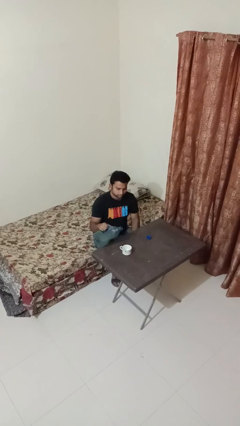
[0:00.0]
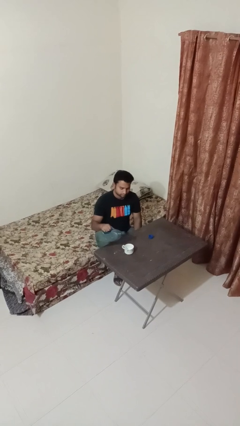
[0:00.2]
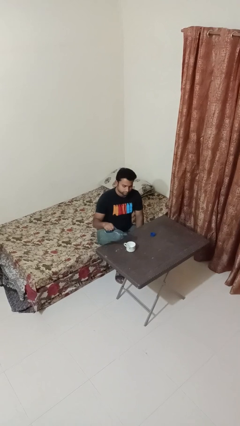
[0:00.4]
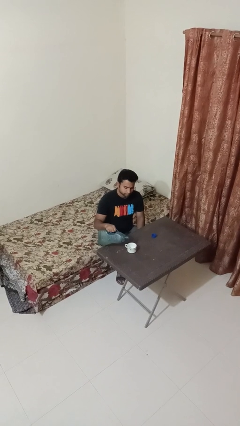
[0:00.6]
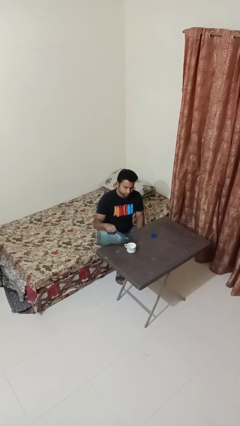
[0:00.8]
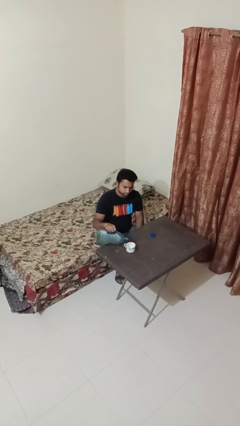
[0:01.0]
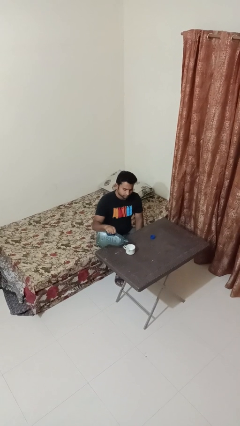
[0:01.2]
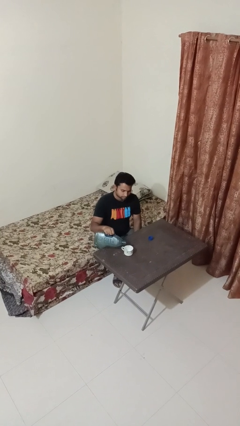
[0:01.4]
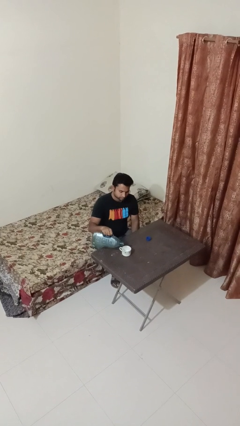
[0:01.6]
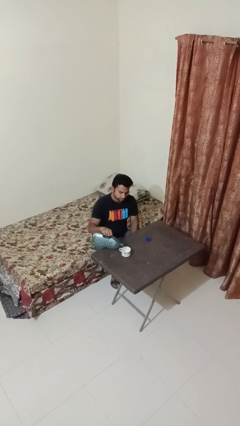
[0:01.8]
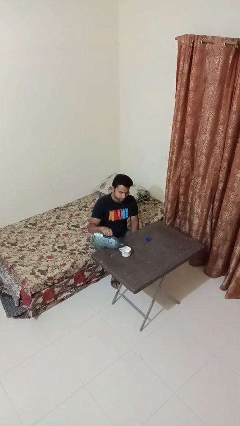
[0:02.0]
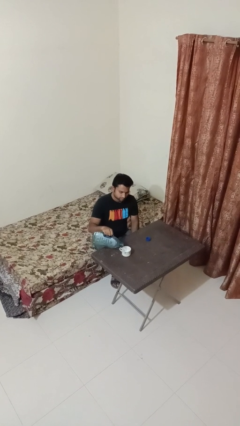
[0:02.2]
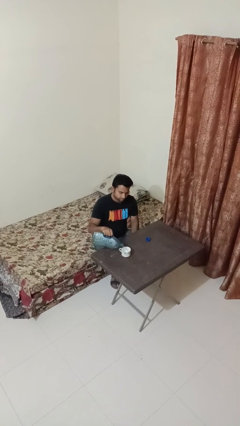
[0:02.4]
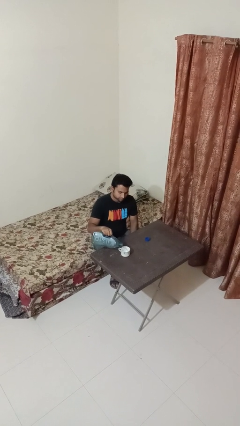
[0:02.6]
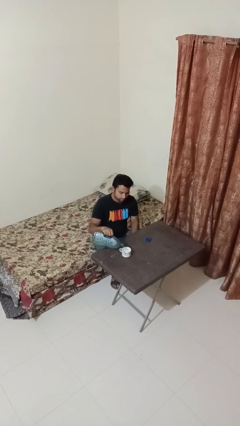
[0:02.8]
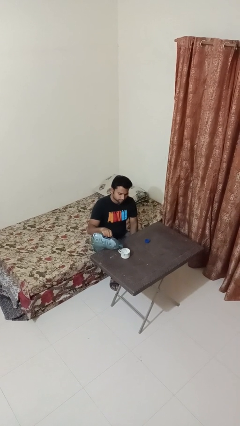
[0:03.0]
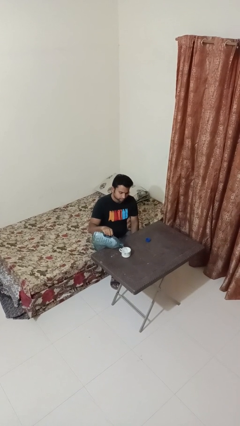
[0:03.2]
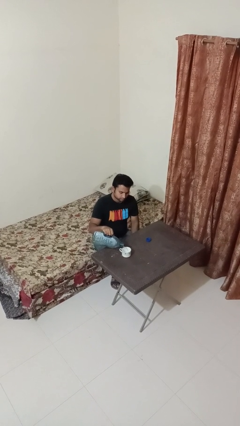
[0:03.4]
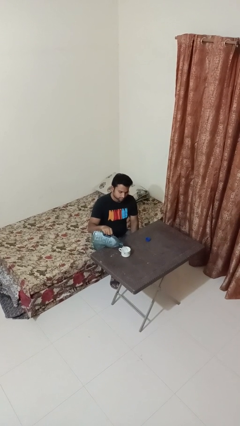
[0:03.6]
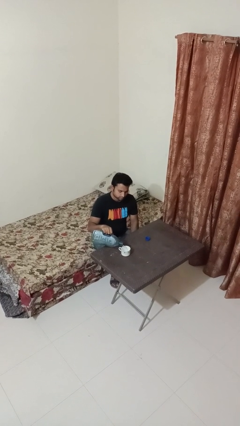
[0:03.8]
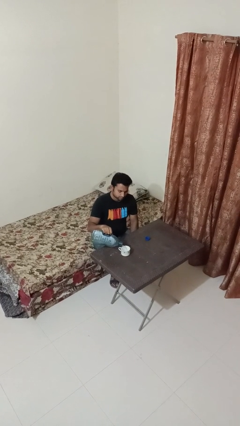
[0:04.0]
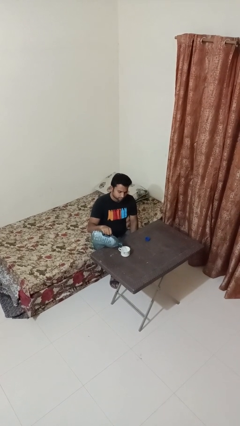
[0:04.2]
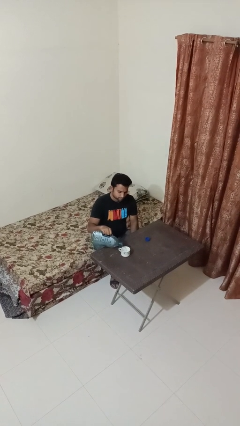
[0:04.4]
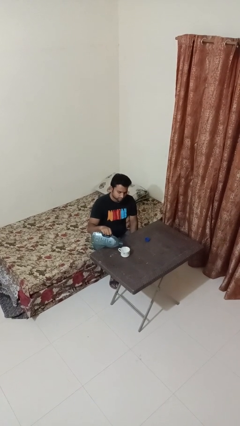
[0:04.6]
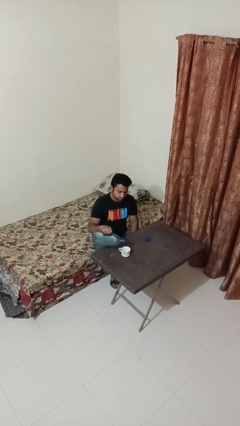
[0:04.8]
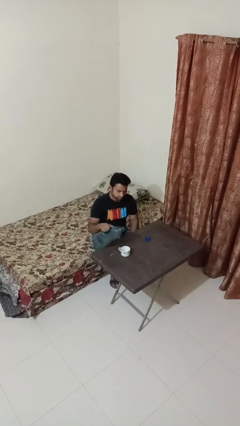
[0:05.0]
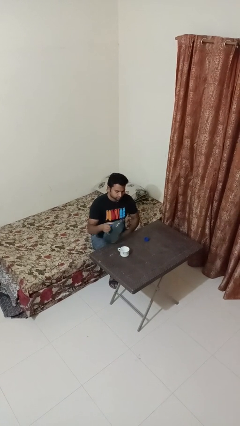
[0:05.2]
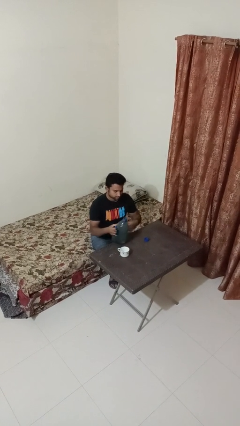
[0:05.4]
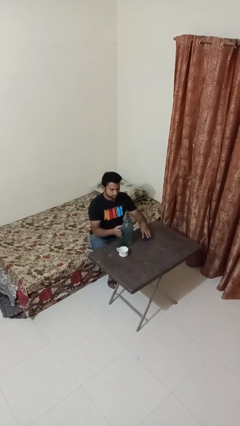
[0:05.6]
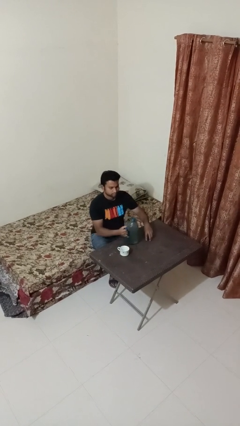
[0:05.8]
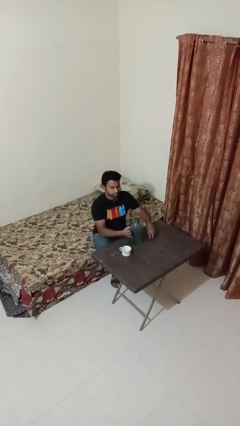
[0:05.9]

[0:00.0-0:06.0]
person pours liquid into cup

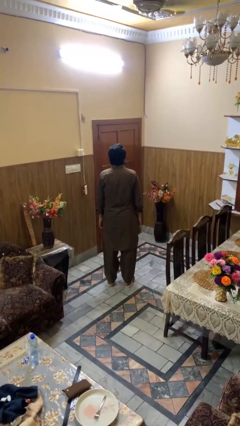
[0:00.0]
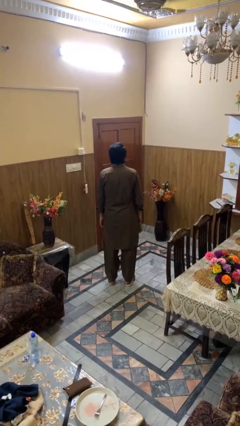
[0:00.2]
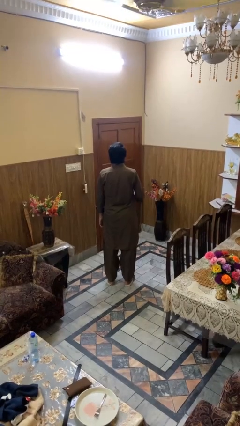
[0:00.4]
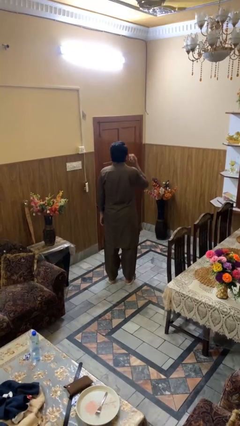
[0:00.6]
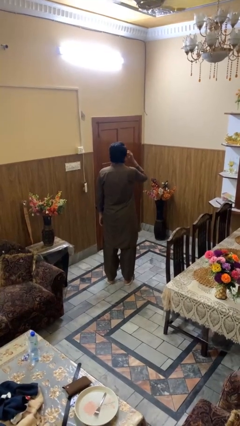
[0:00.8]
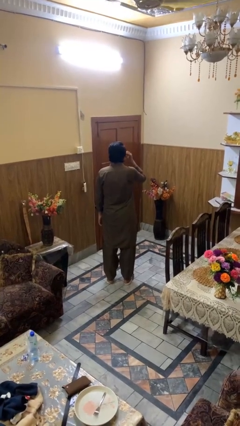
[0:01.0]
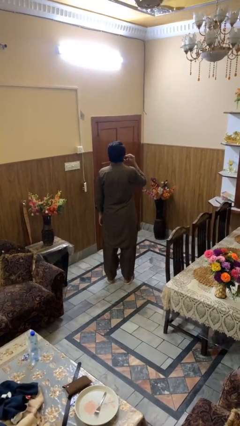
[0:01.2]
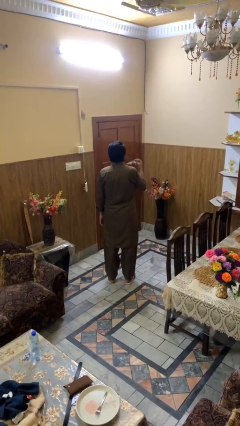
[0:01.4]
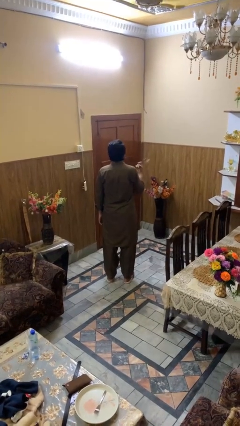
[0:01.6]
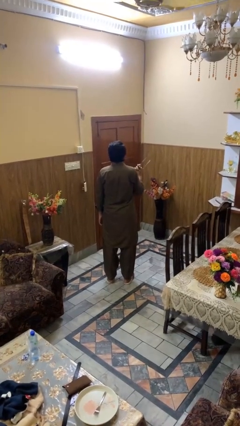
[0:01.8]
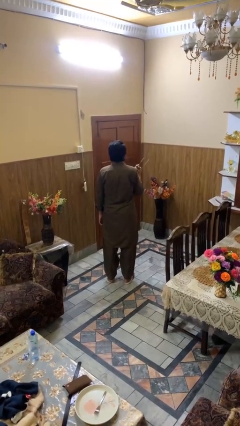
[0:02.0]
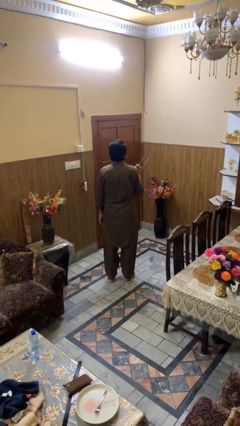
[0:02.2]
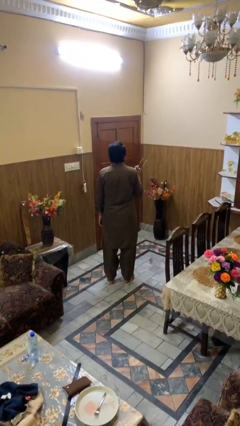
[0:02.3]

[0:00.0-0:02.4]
person takes off sunglasses

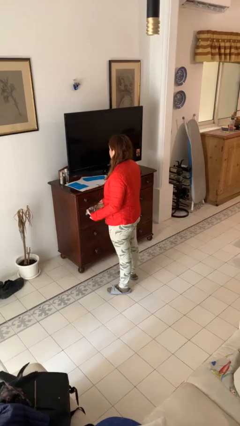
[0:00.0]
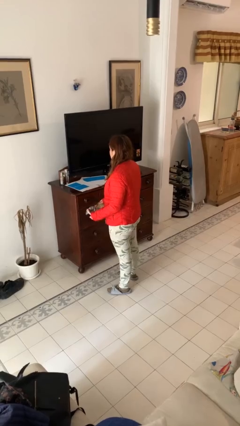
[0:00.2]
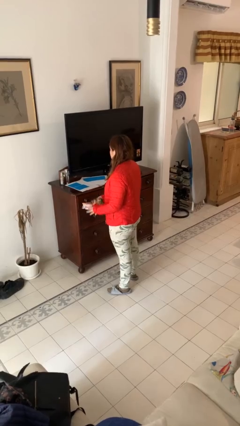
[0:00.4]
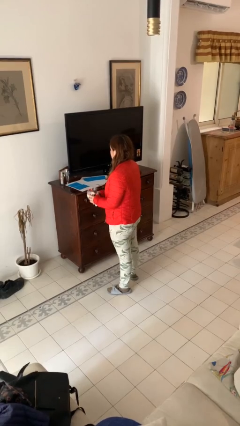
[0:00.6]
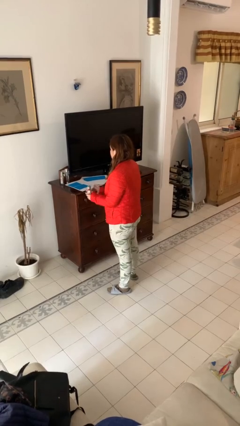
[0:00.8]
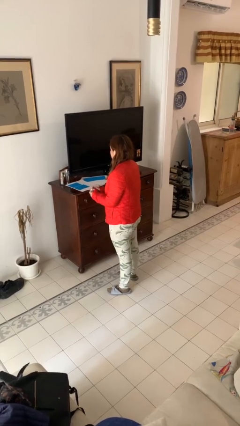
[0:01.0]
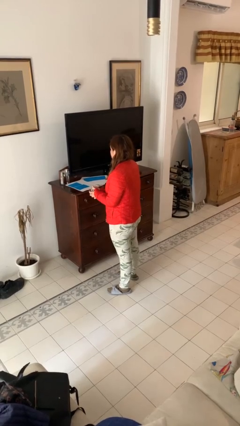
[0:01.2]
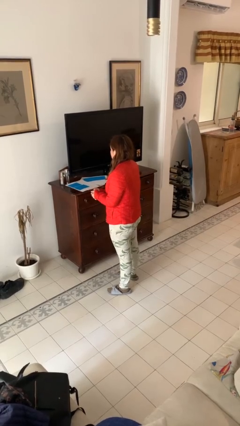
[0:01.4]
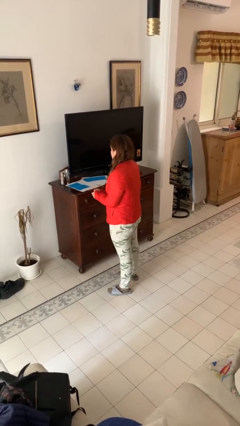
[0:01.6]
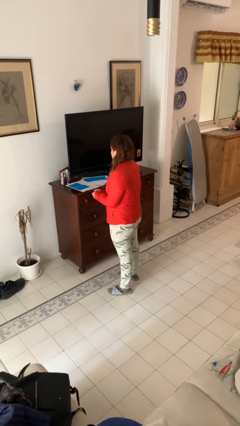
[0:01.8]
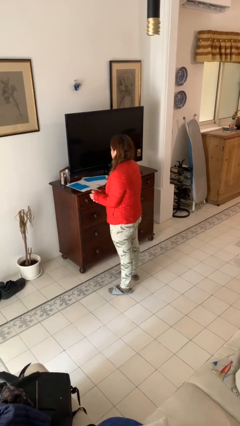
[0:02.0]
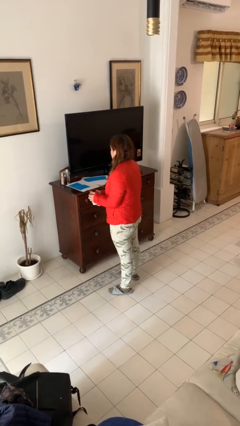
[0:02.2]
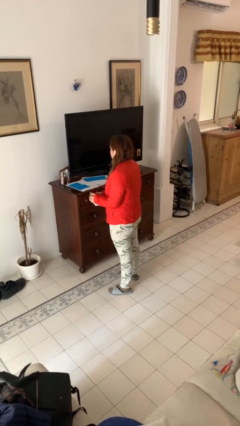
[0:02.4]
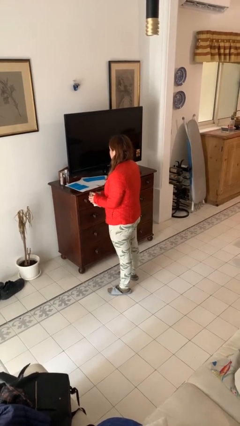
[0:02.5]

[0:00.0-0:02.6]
person crumples paper

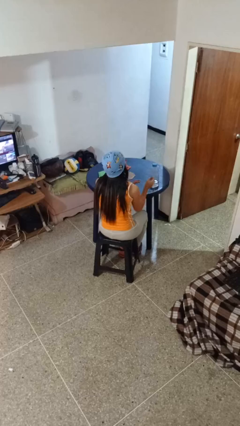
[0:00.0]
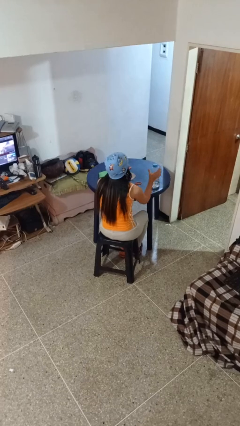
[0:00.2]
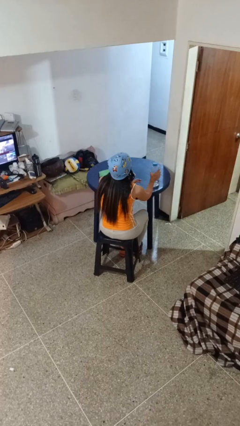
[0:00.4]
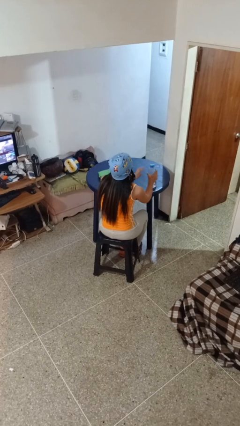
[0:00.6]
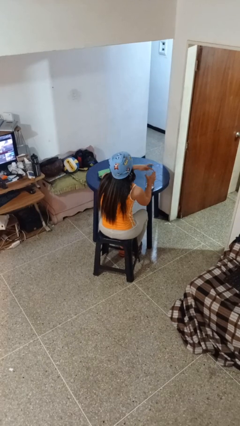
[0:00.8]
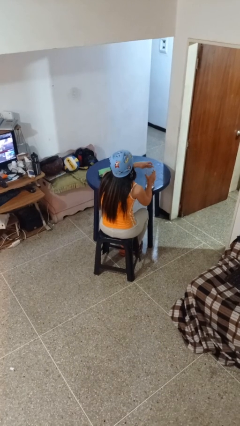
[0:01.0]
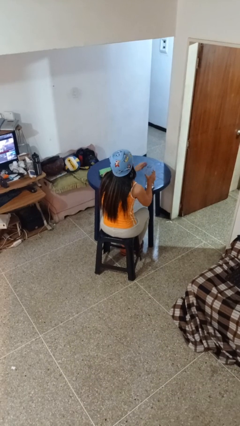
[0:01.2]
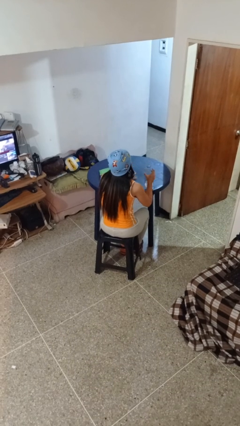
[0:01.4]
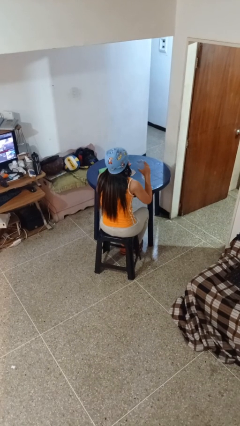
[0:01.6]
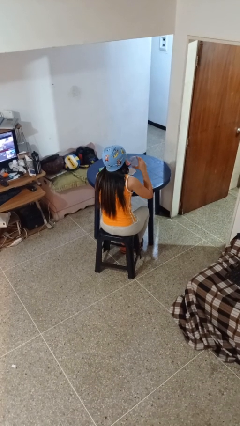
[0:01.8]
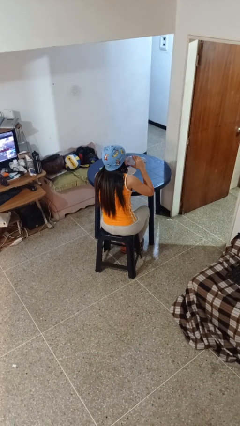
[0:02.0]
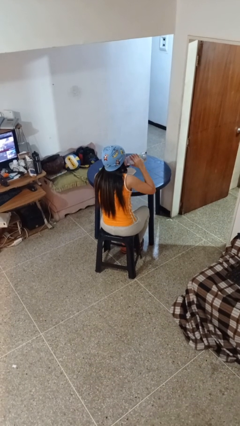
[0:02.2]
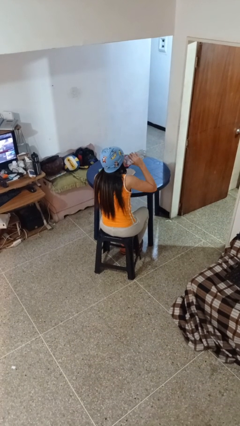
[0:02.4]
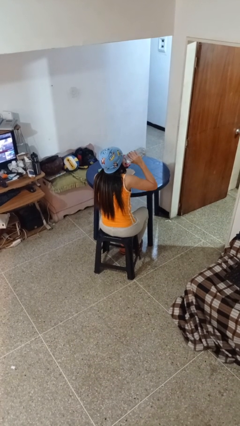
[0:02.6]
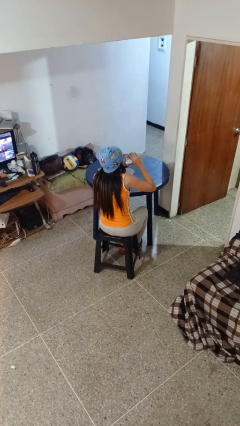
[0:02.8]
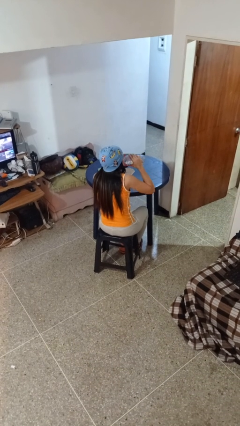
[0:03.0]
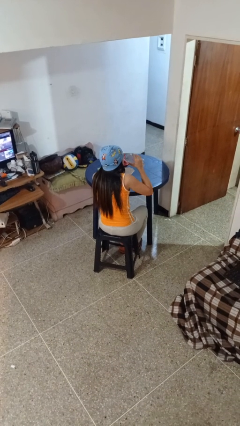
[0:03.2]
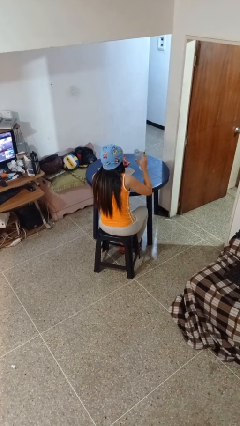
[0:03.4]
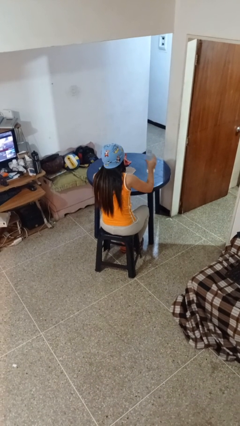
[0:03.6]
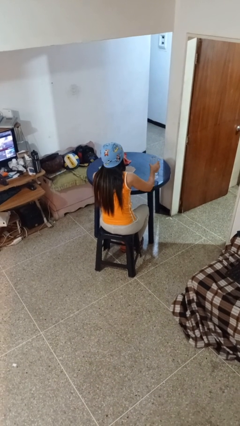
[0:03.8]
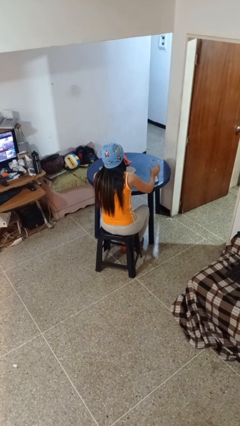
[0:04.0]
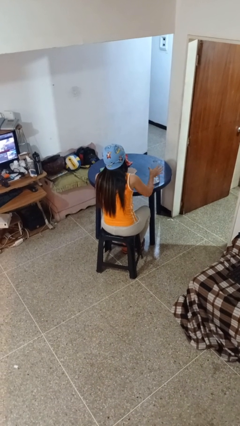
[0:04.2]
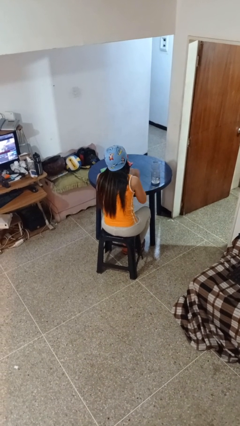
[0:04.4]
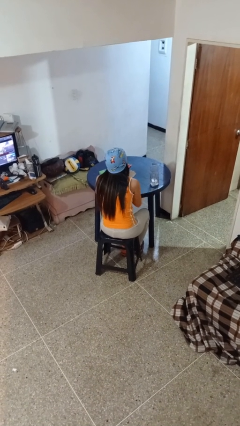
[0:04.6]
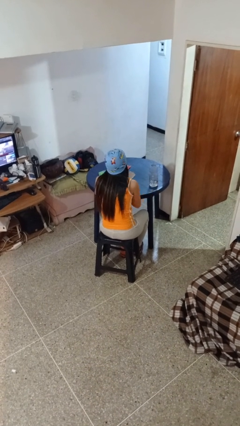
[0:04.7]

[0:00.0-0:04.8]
person drinks from bottle

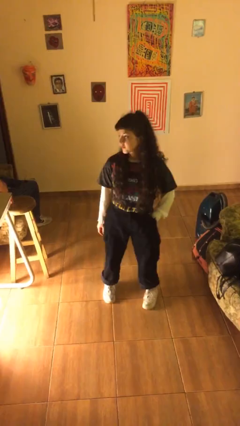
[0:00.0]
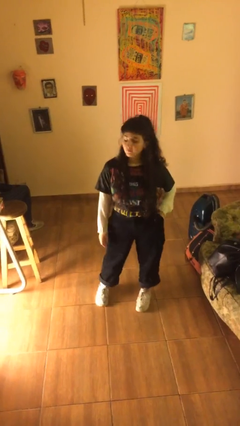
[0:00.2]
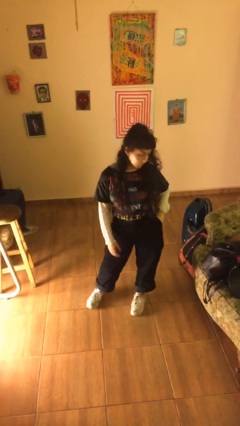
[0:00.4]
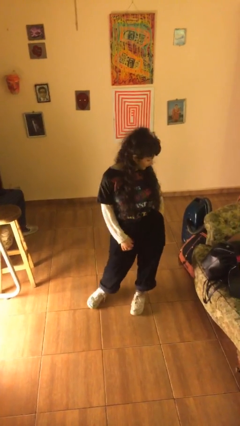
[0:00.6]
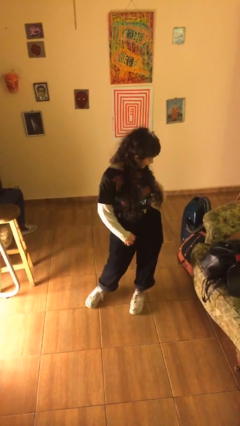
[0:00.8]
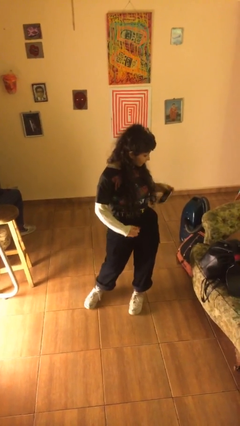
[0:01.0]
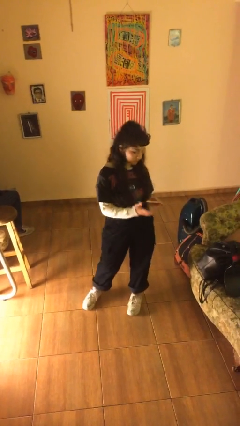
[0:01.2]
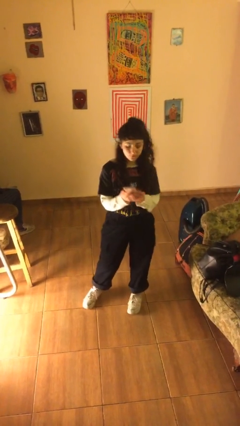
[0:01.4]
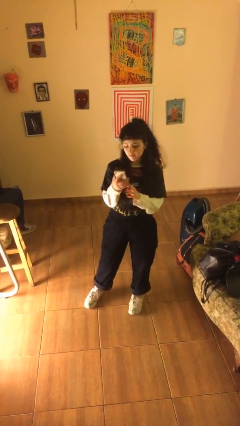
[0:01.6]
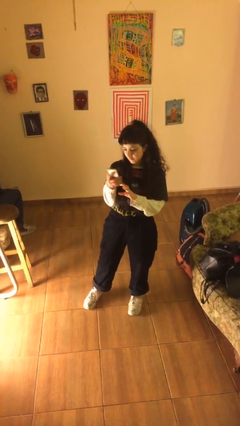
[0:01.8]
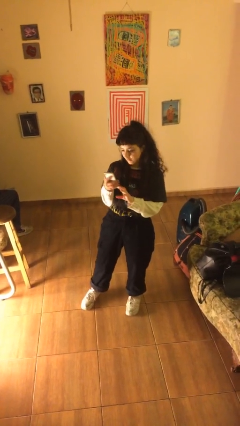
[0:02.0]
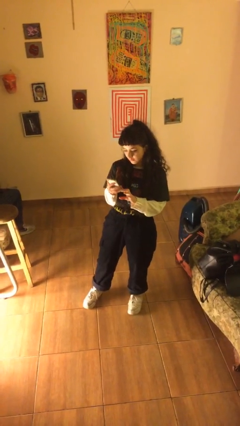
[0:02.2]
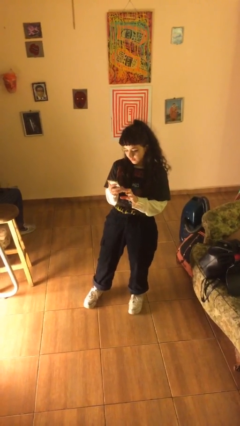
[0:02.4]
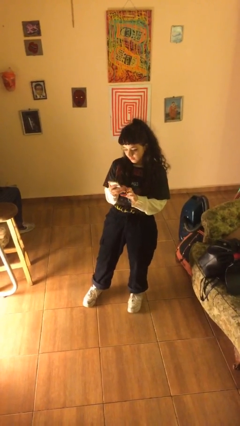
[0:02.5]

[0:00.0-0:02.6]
person takes phone from pocket
